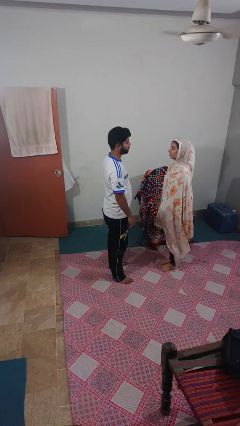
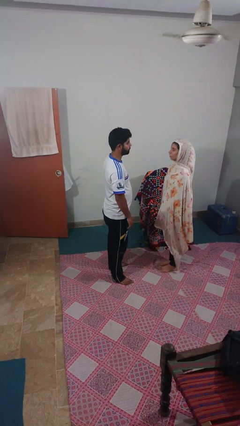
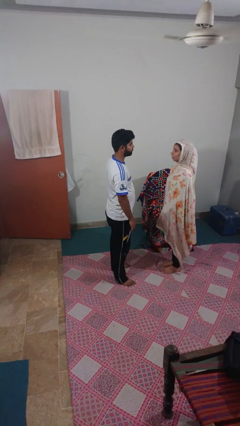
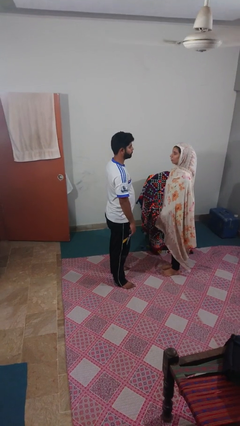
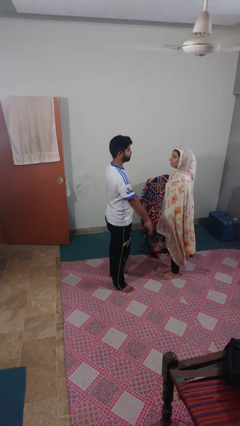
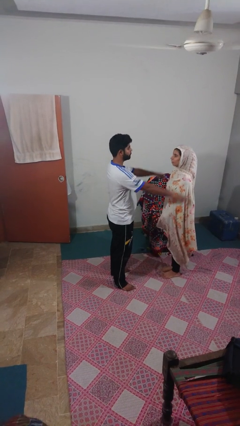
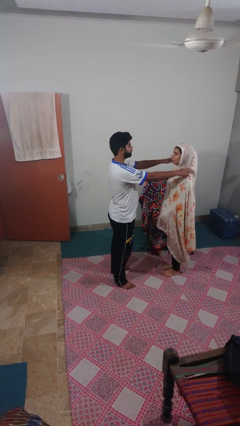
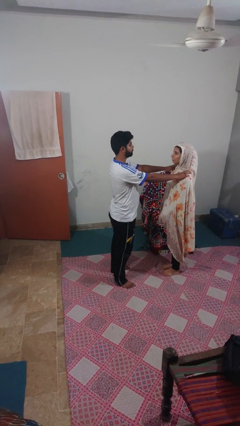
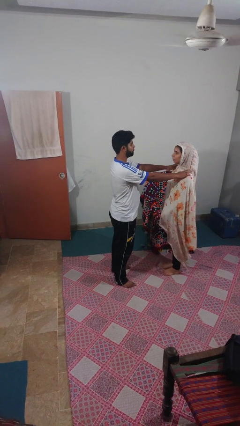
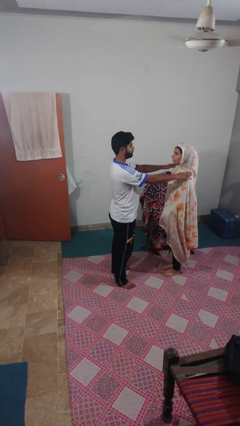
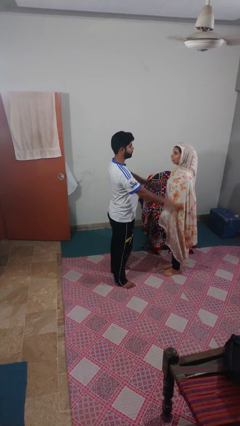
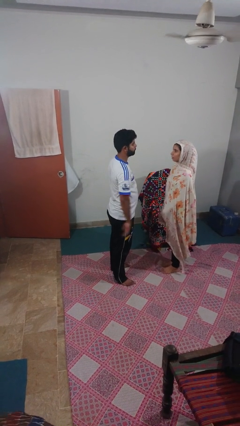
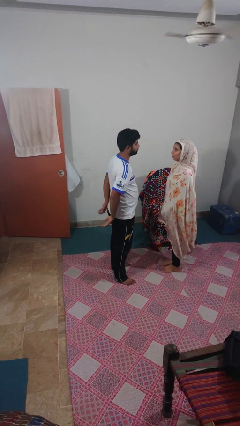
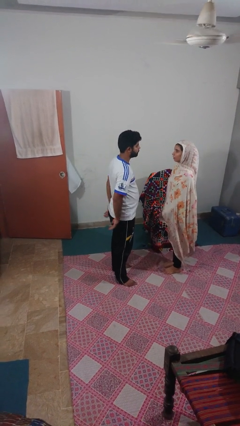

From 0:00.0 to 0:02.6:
person pounds shoulders of person

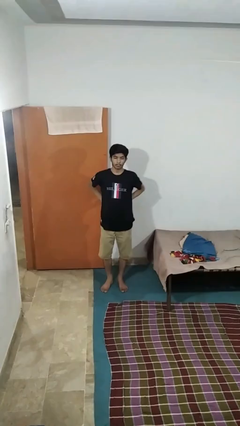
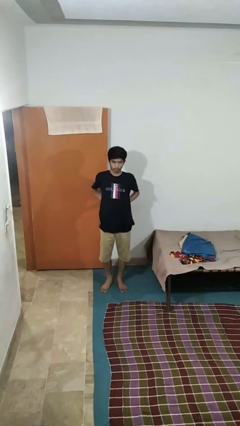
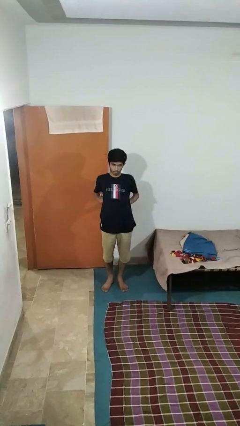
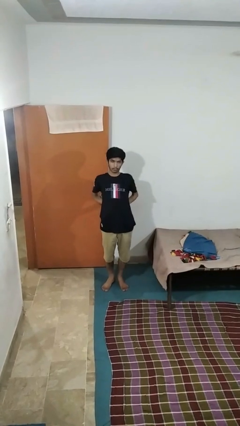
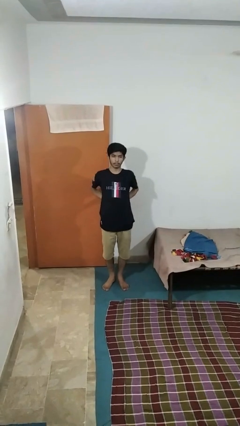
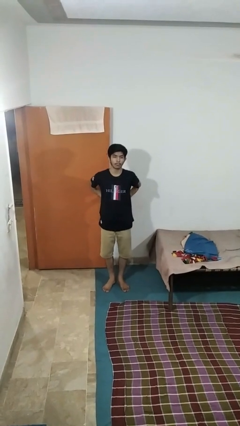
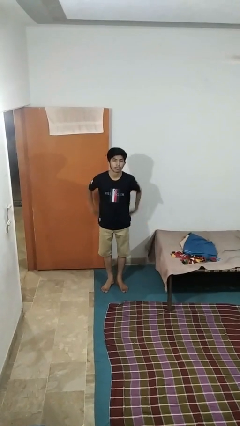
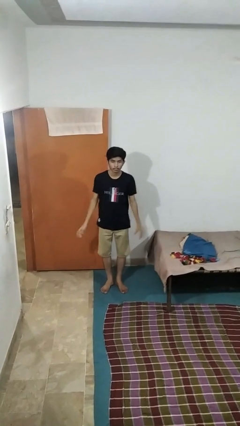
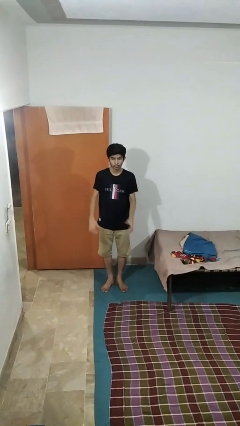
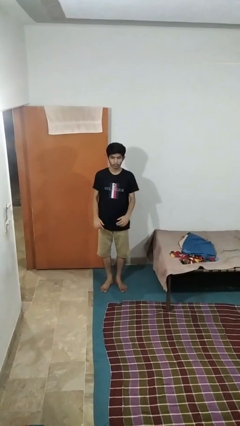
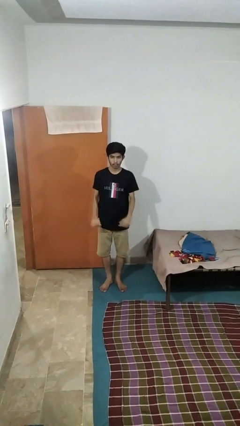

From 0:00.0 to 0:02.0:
person stretches back

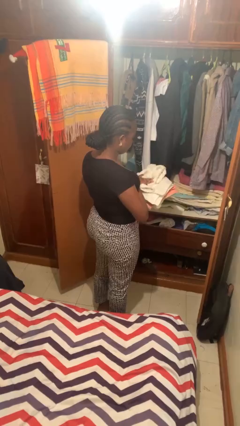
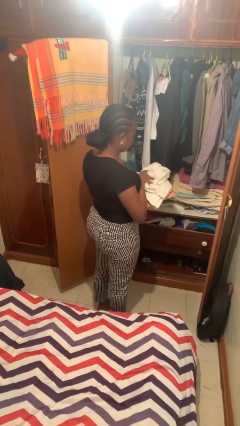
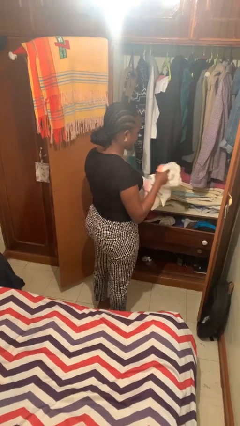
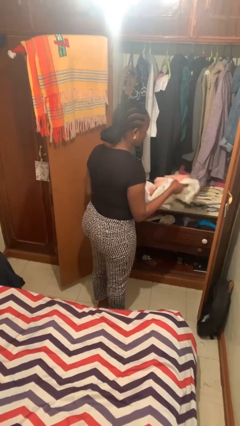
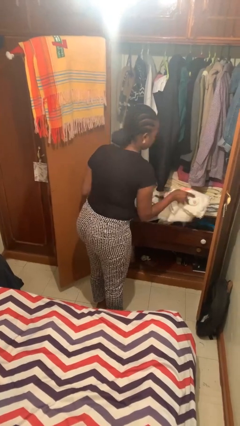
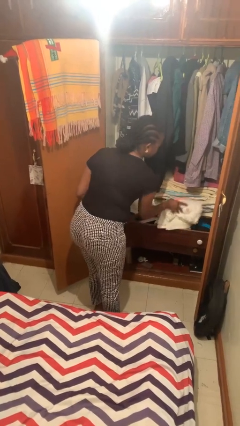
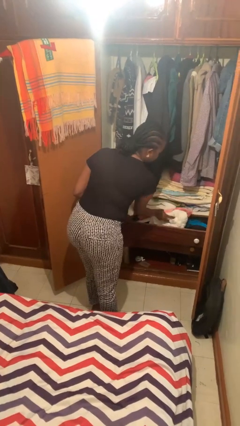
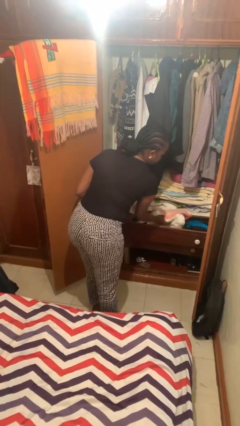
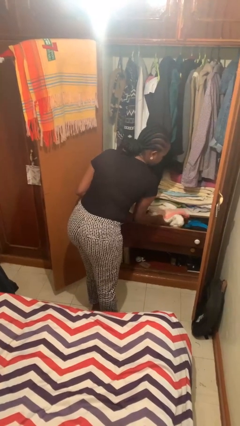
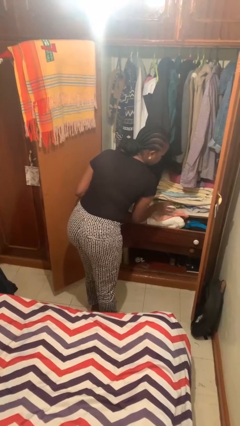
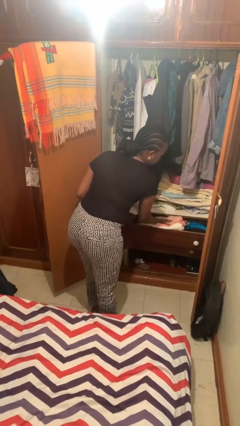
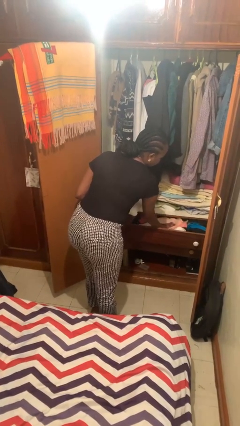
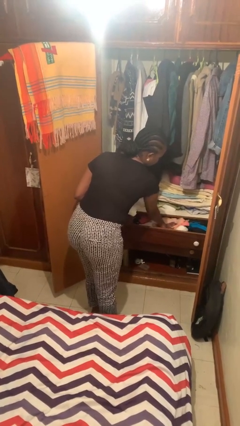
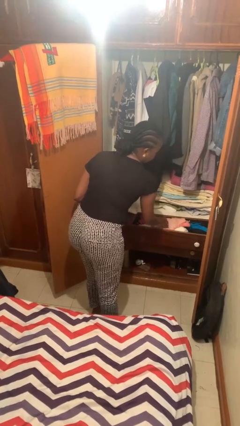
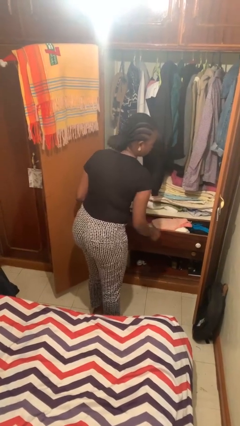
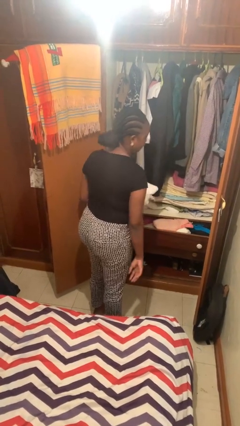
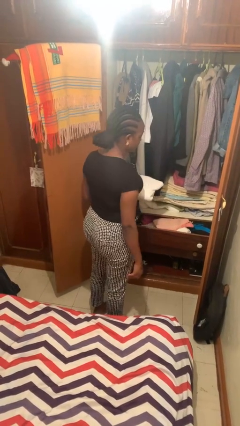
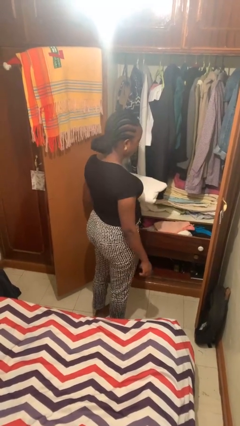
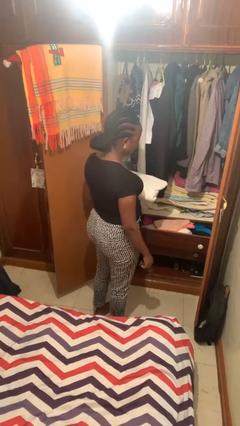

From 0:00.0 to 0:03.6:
person puts clothes into dresser

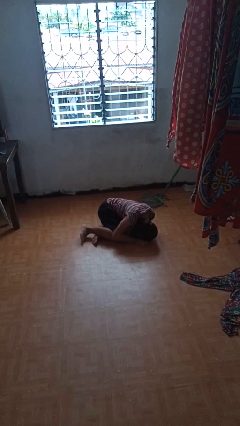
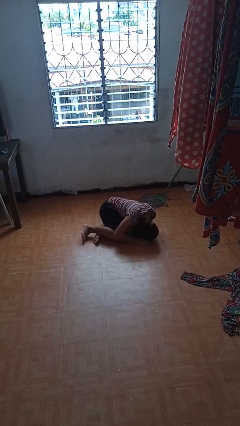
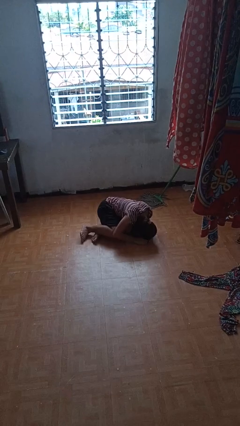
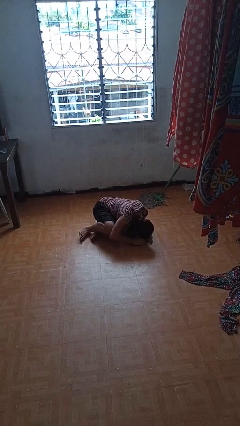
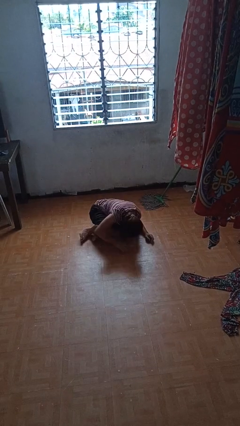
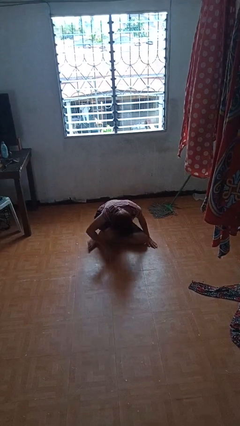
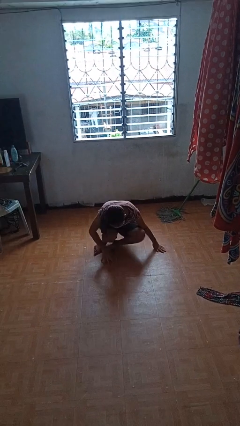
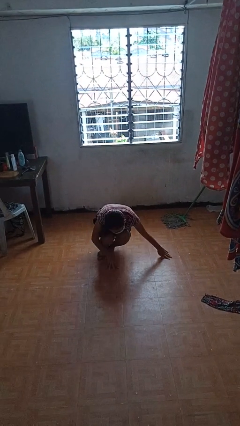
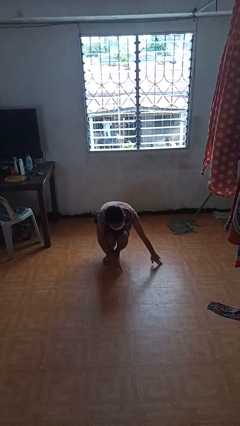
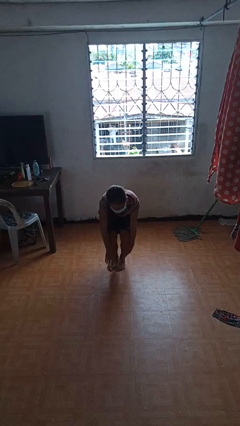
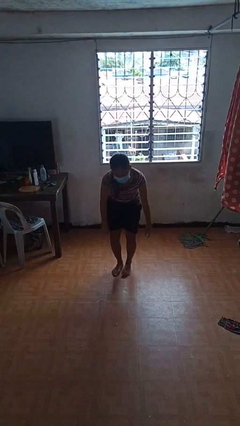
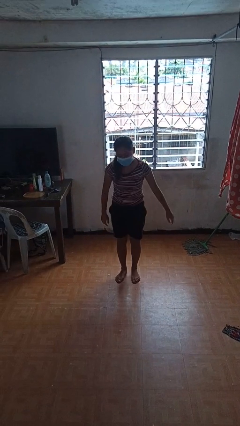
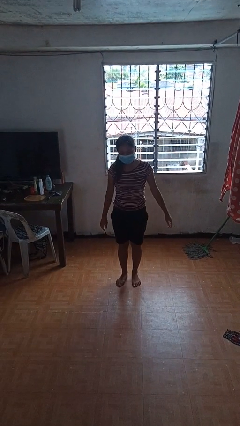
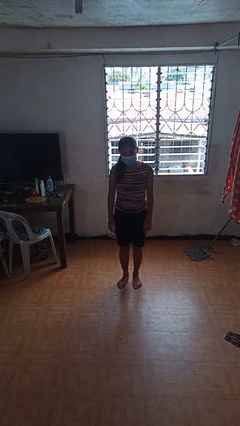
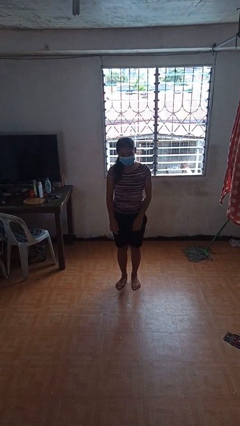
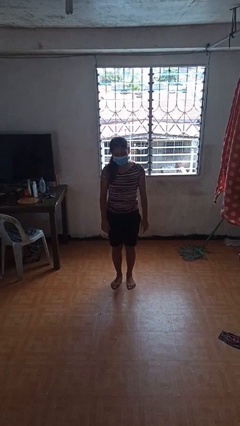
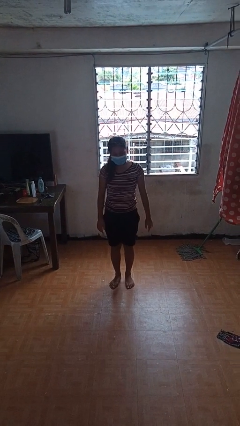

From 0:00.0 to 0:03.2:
person stands up from floor

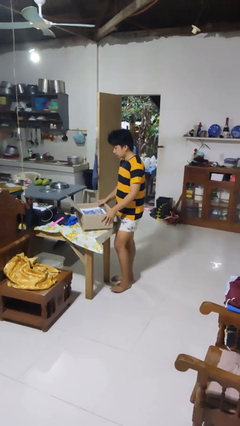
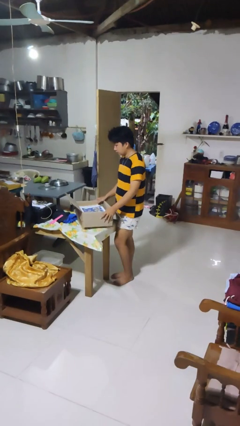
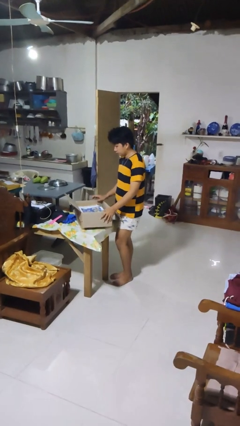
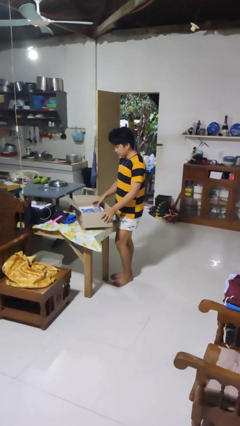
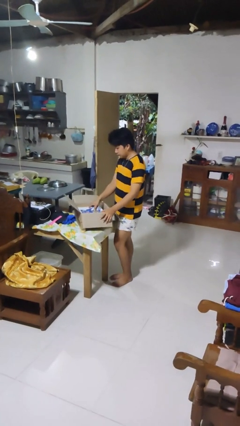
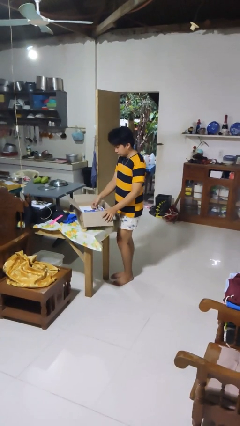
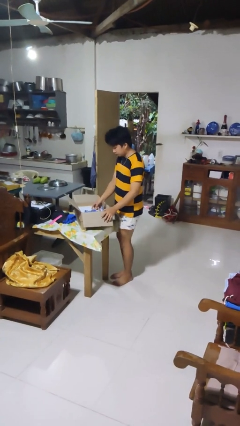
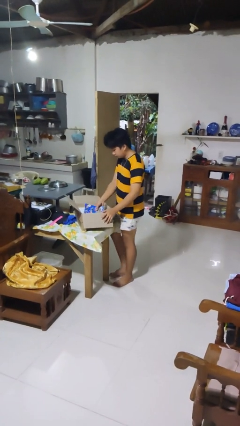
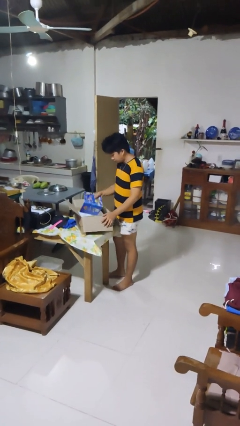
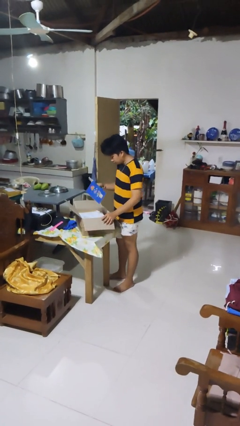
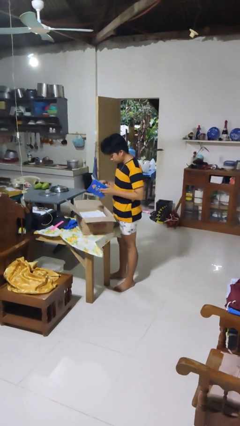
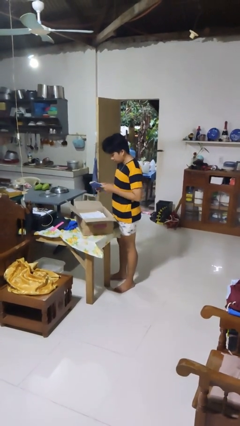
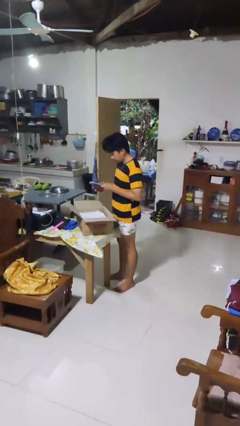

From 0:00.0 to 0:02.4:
person takes object from box

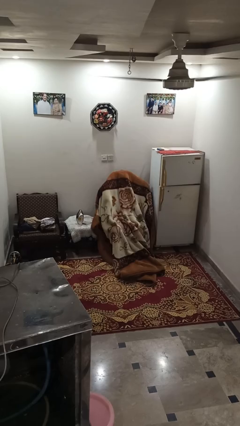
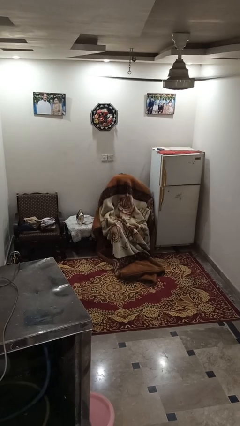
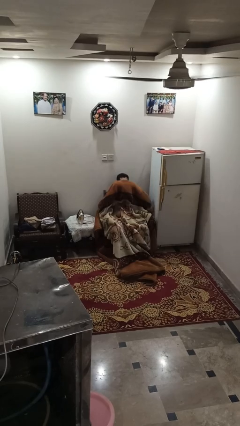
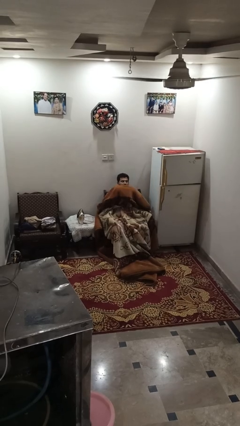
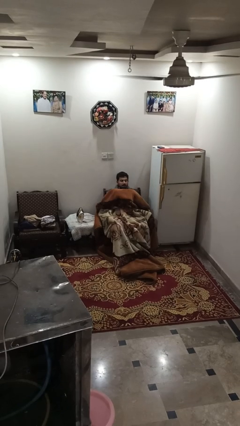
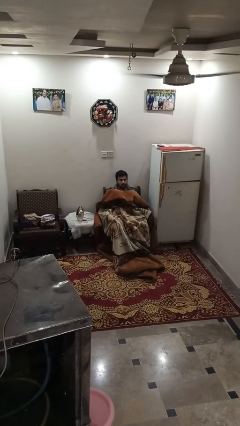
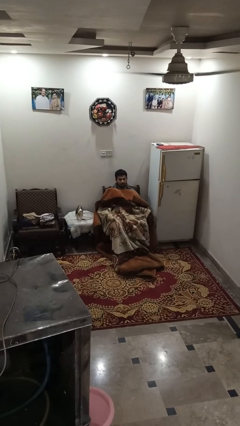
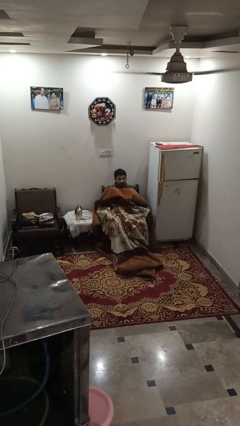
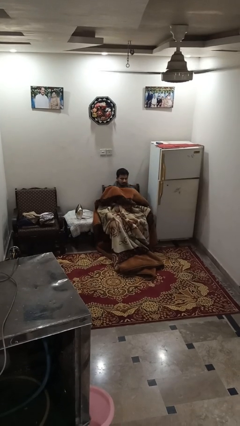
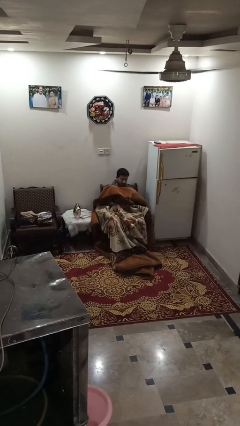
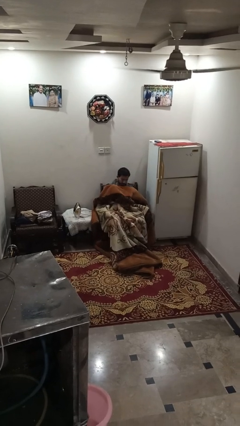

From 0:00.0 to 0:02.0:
person uncovers with blanket

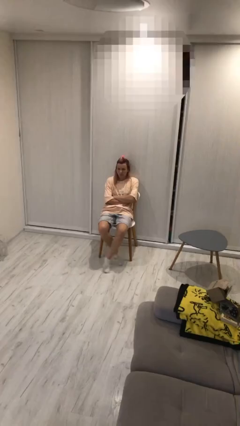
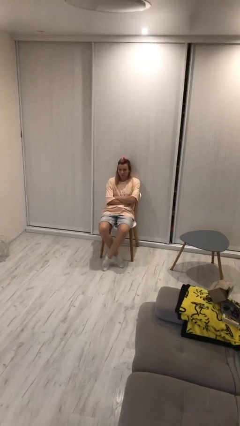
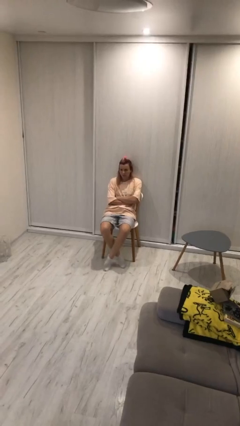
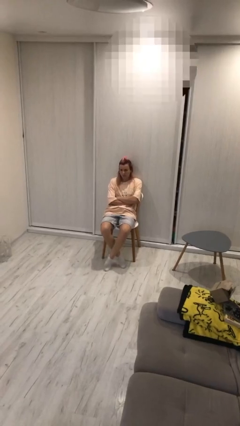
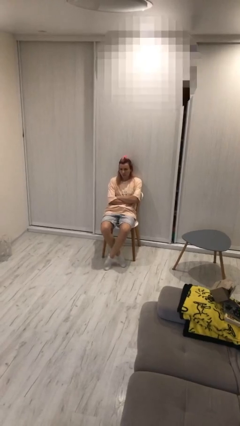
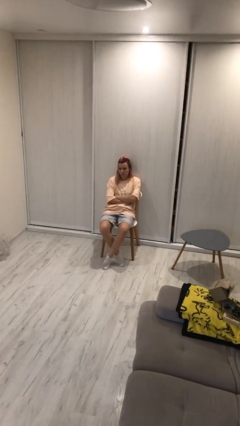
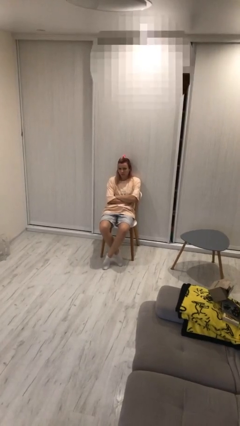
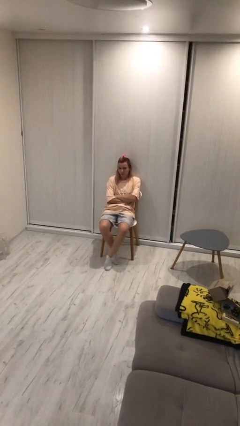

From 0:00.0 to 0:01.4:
person crosses legs
